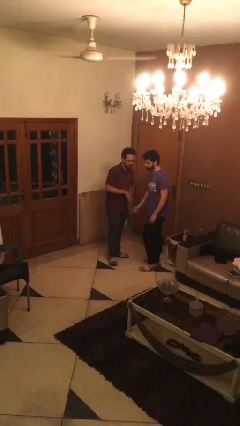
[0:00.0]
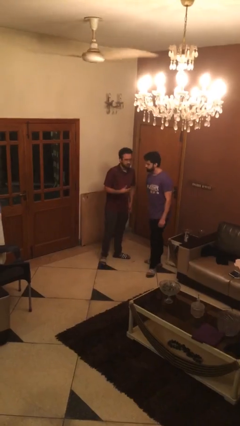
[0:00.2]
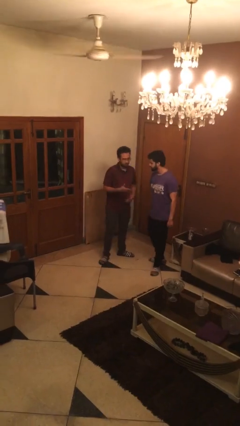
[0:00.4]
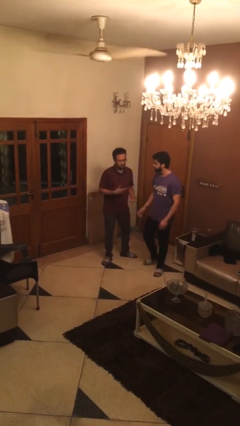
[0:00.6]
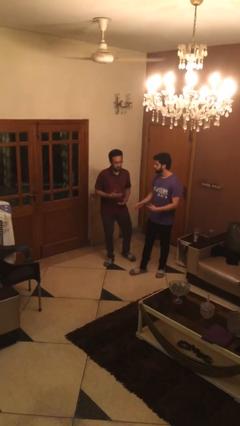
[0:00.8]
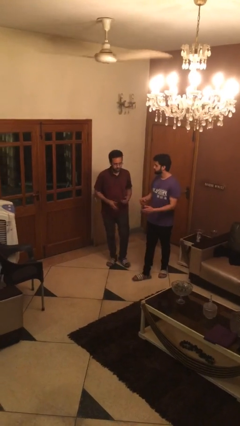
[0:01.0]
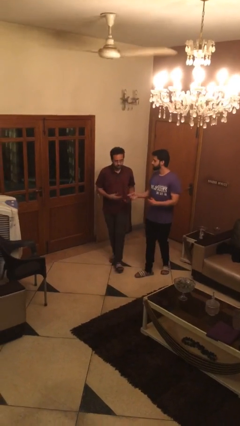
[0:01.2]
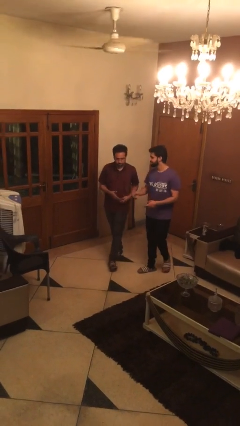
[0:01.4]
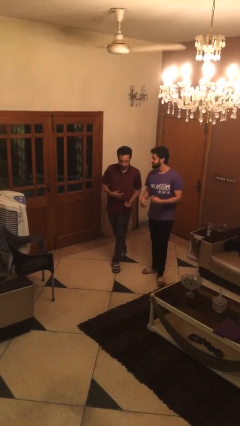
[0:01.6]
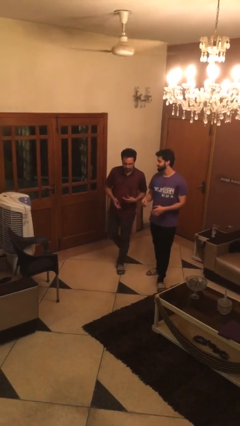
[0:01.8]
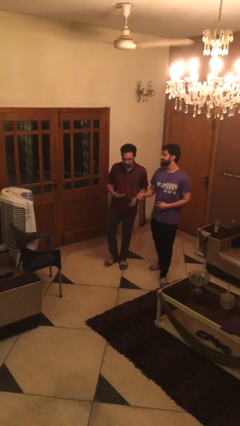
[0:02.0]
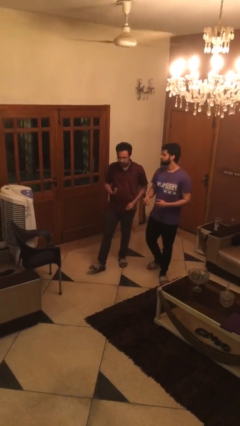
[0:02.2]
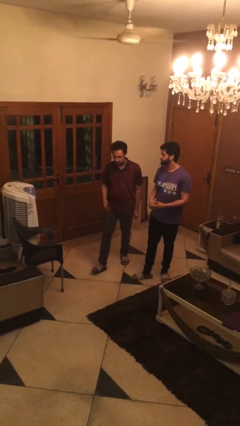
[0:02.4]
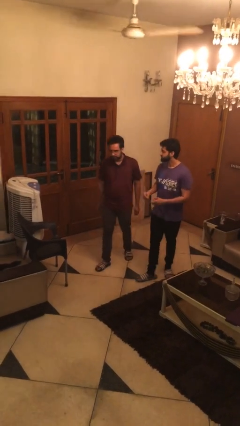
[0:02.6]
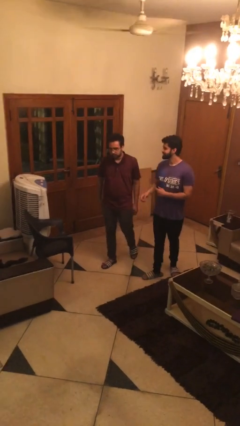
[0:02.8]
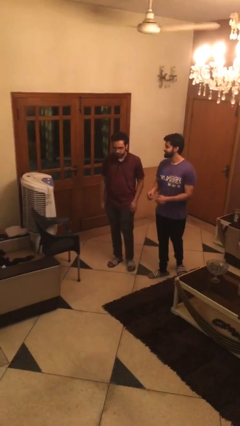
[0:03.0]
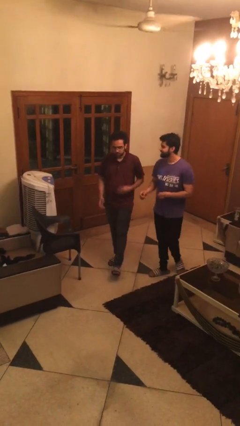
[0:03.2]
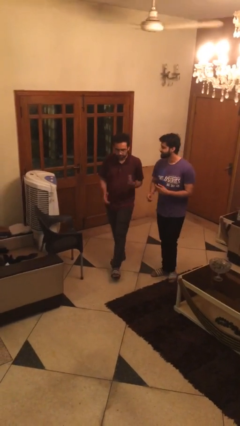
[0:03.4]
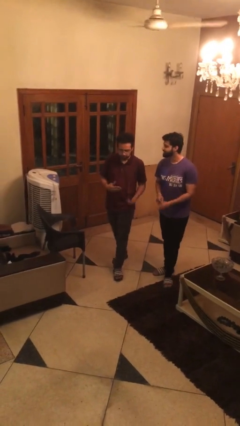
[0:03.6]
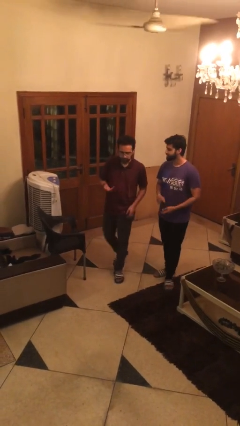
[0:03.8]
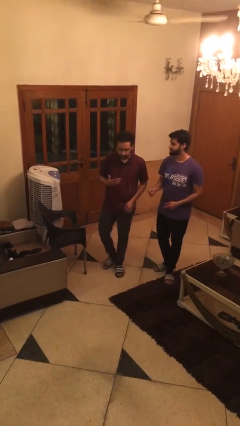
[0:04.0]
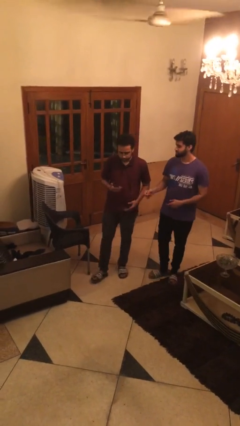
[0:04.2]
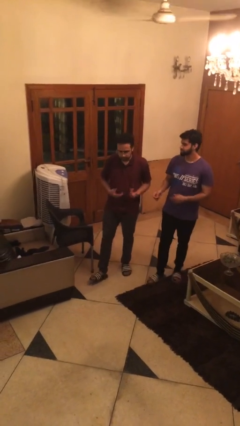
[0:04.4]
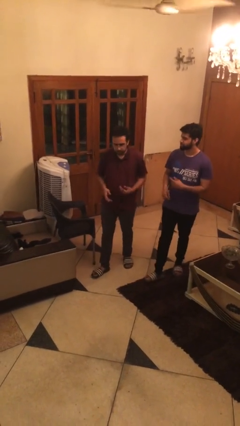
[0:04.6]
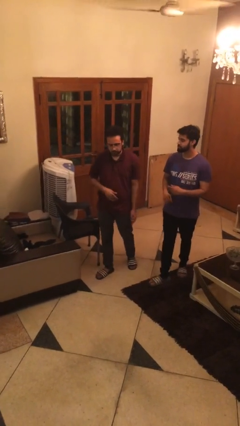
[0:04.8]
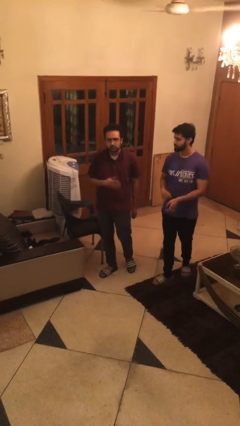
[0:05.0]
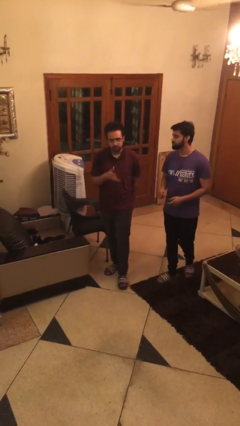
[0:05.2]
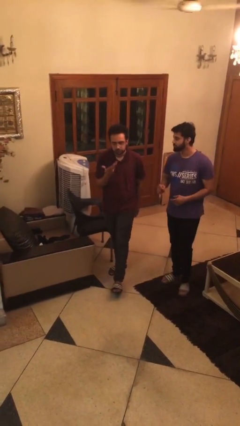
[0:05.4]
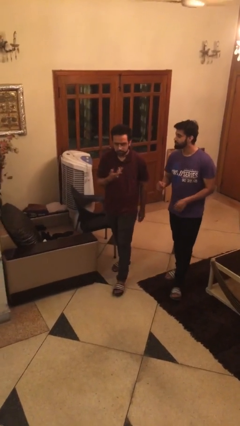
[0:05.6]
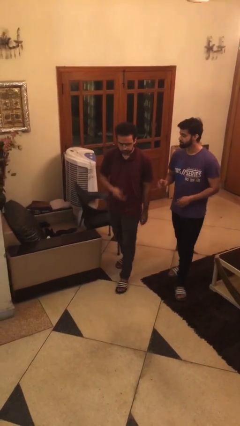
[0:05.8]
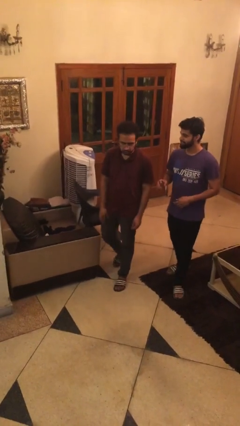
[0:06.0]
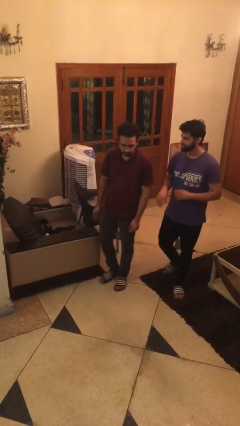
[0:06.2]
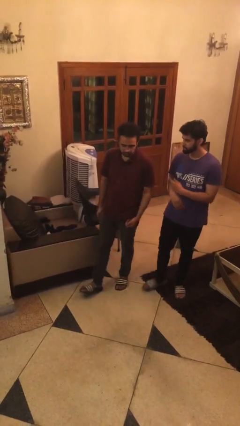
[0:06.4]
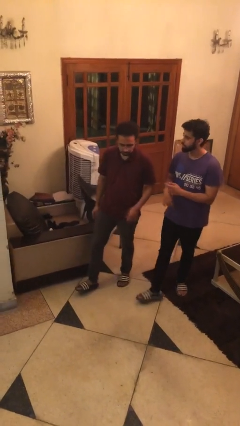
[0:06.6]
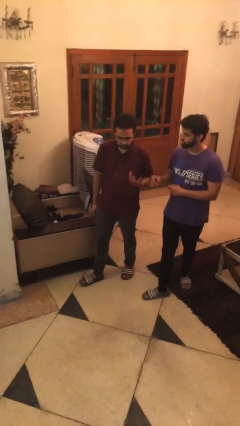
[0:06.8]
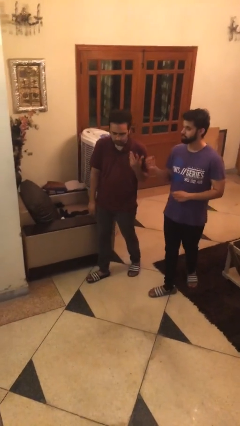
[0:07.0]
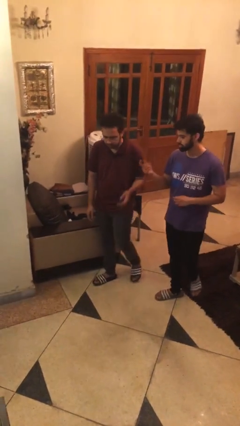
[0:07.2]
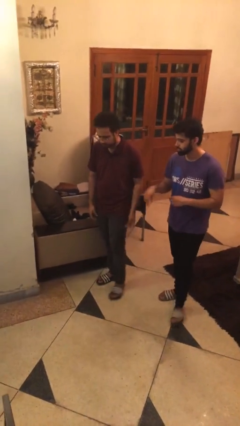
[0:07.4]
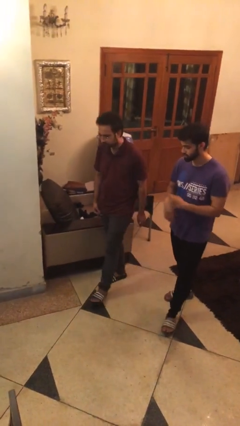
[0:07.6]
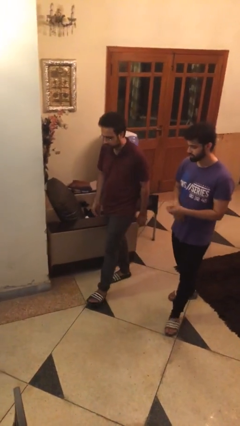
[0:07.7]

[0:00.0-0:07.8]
person talks to person

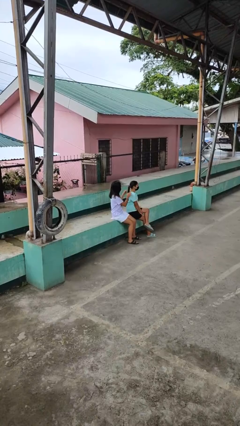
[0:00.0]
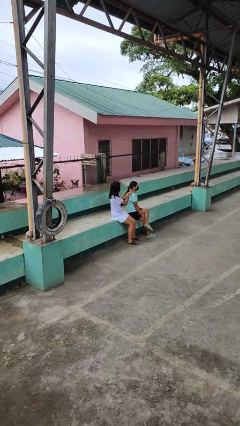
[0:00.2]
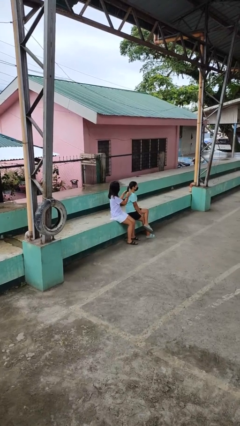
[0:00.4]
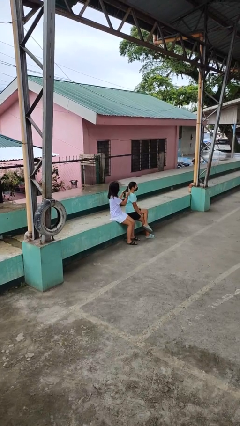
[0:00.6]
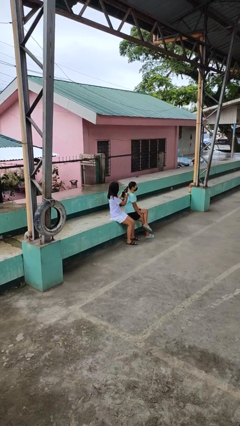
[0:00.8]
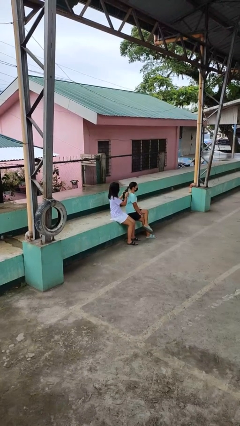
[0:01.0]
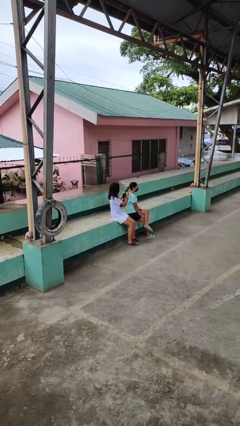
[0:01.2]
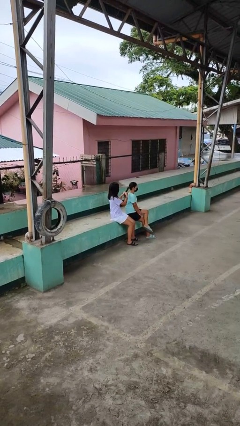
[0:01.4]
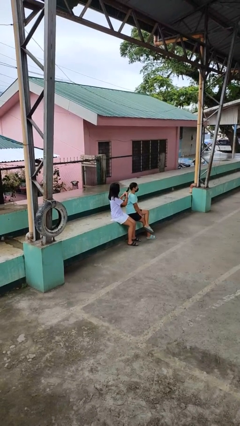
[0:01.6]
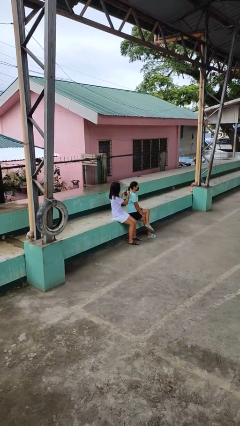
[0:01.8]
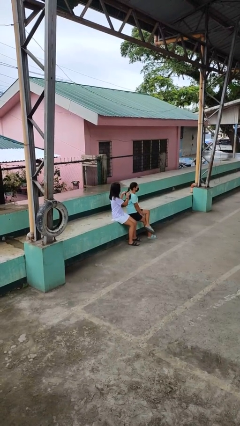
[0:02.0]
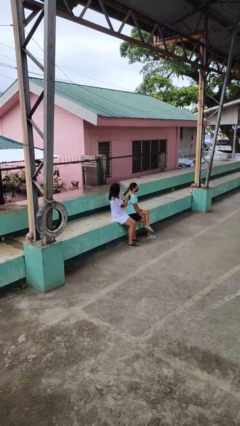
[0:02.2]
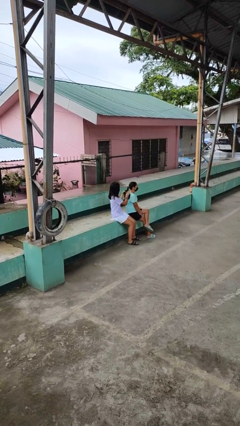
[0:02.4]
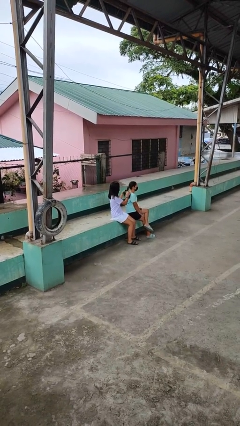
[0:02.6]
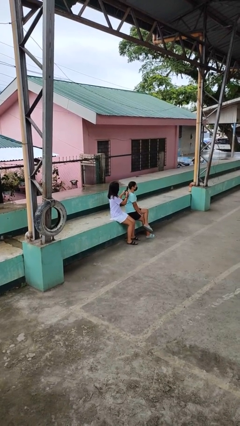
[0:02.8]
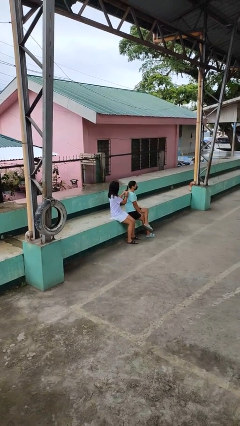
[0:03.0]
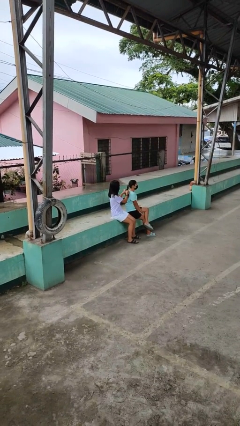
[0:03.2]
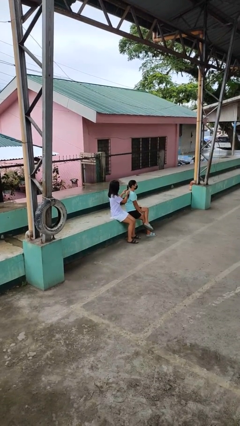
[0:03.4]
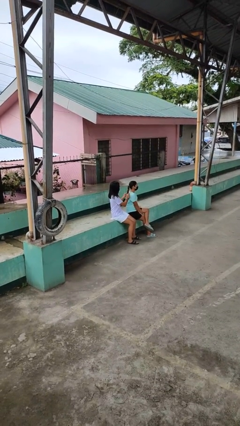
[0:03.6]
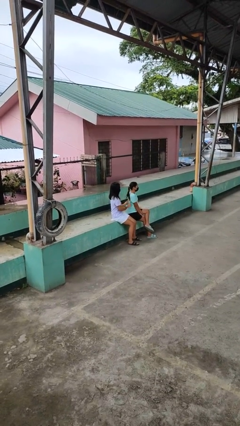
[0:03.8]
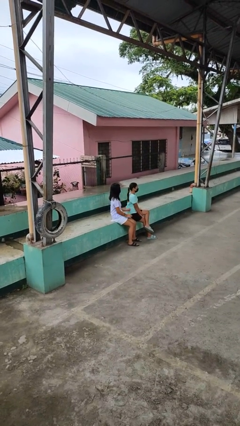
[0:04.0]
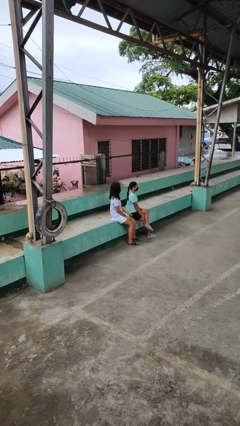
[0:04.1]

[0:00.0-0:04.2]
person braids hair of person

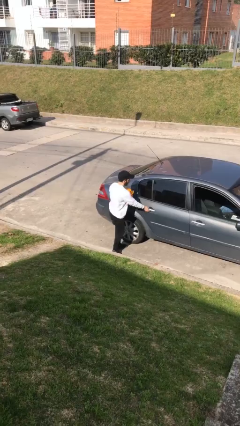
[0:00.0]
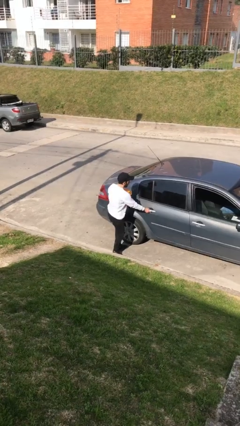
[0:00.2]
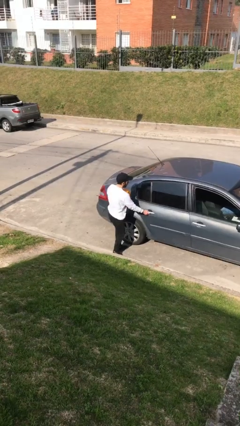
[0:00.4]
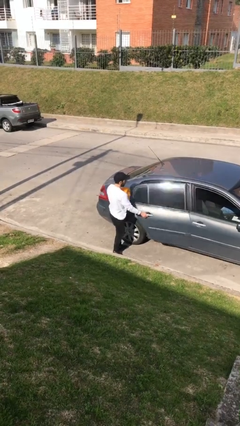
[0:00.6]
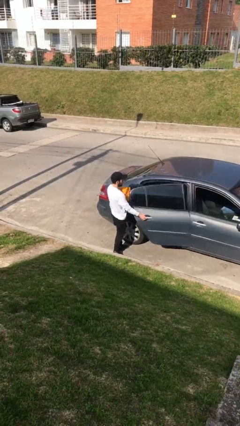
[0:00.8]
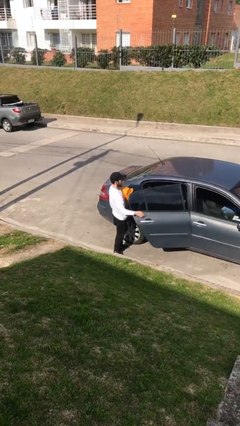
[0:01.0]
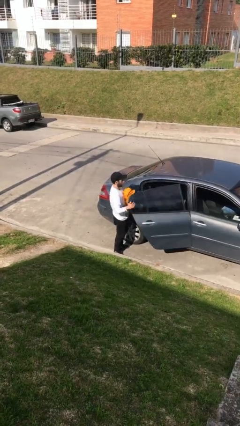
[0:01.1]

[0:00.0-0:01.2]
person opens car door

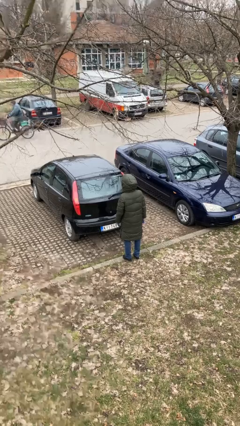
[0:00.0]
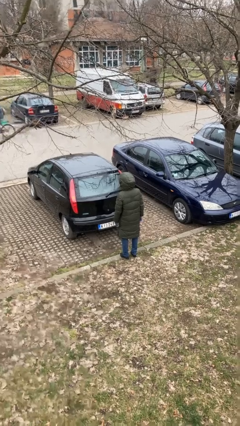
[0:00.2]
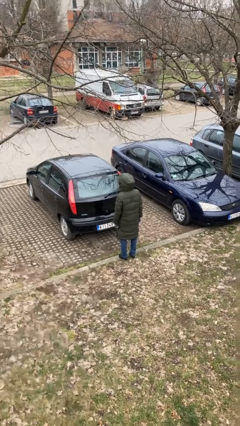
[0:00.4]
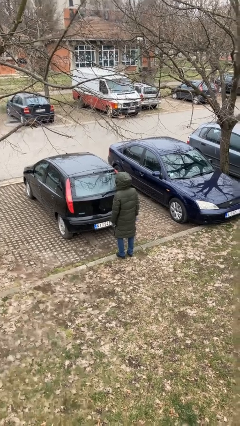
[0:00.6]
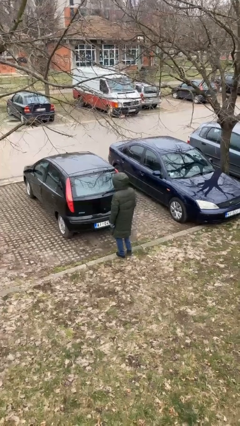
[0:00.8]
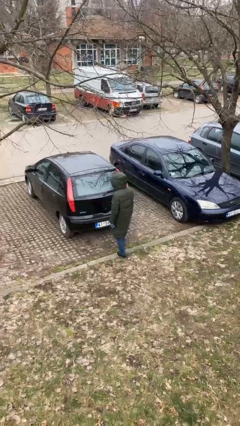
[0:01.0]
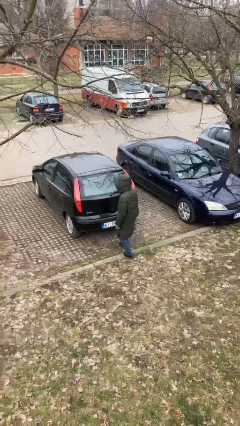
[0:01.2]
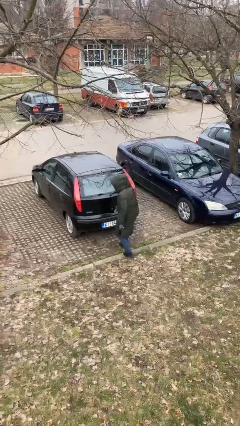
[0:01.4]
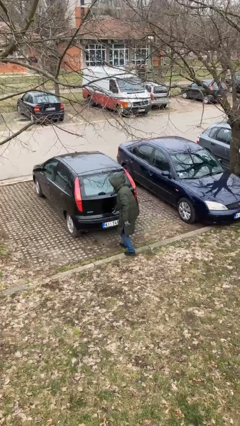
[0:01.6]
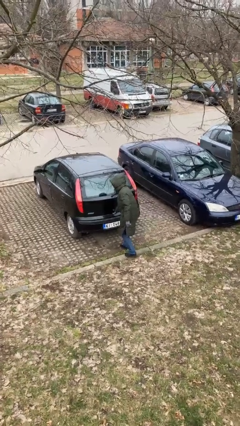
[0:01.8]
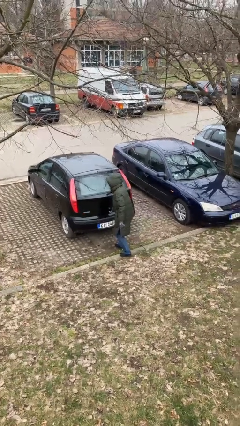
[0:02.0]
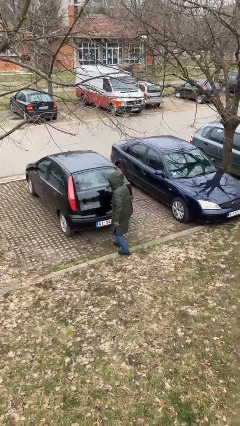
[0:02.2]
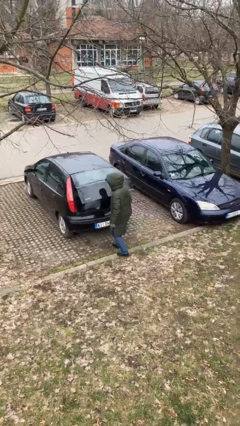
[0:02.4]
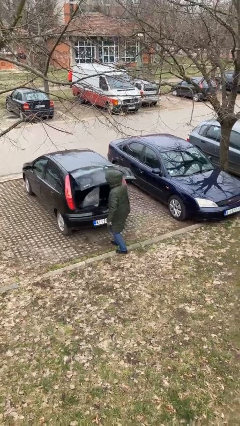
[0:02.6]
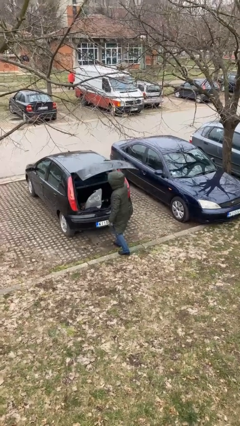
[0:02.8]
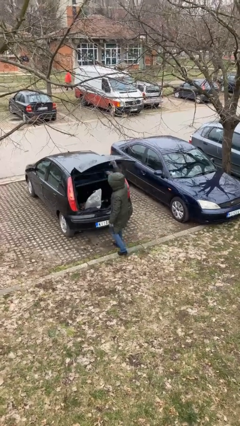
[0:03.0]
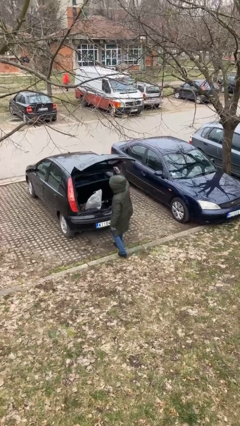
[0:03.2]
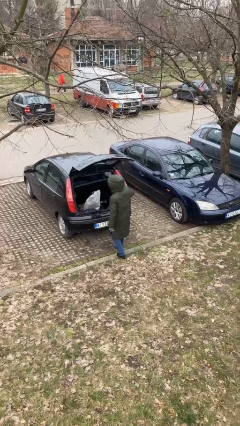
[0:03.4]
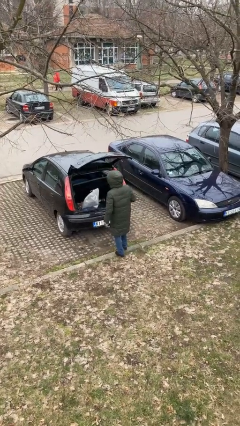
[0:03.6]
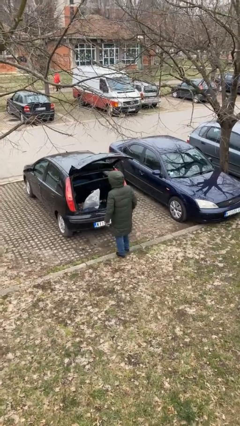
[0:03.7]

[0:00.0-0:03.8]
person opens car trunk

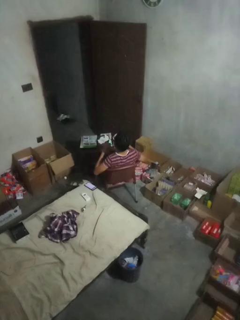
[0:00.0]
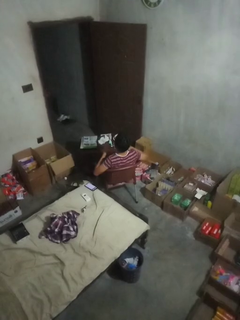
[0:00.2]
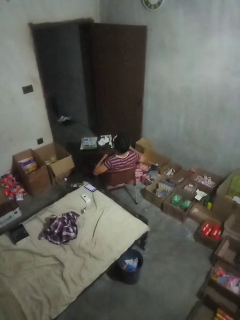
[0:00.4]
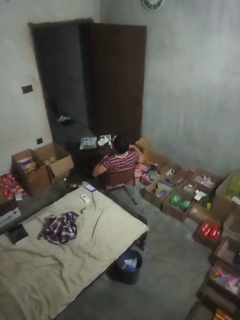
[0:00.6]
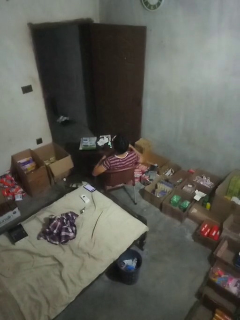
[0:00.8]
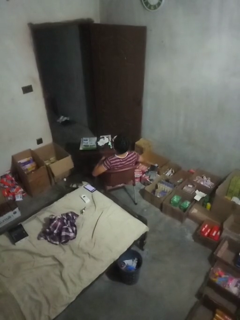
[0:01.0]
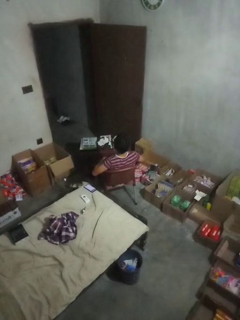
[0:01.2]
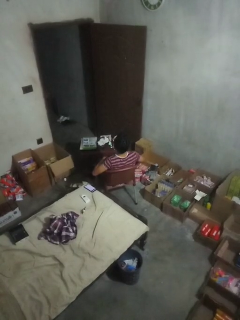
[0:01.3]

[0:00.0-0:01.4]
person drums on chest
